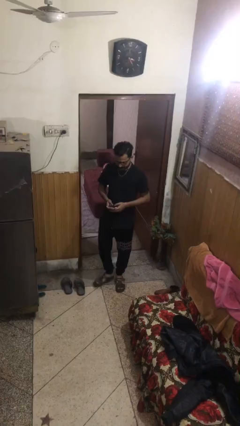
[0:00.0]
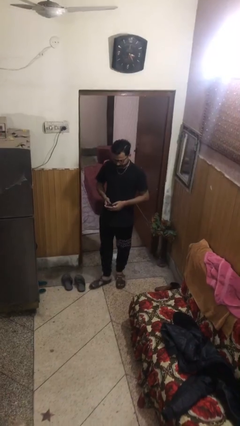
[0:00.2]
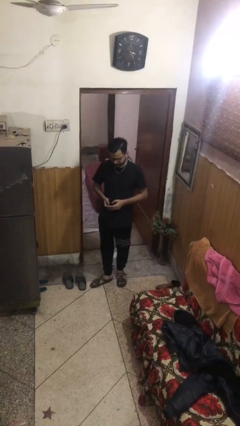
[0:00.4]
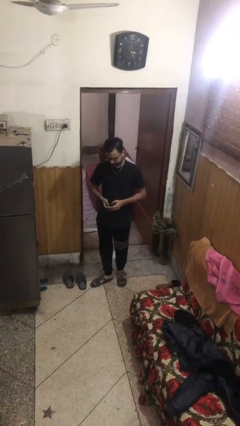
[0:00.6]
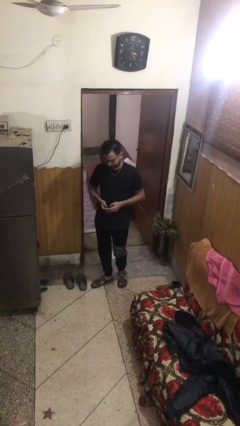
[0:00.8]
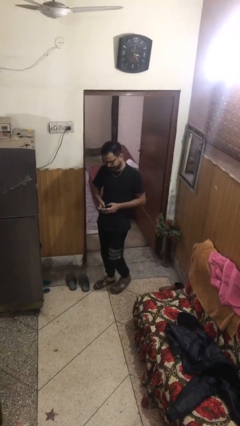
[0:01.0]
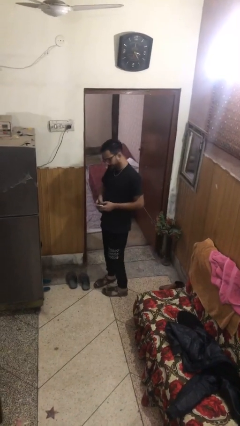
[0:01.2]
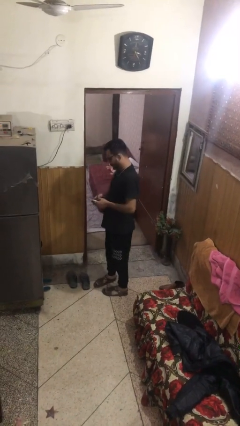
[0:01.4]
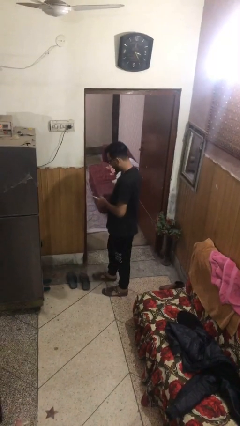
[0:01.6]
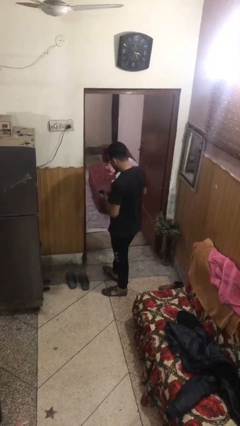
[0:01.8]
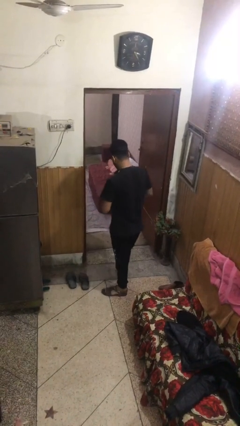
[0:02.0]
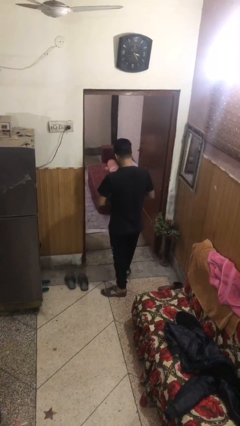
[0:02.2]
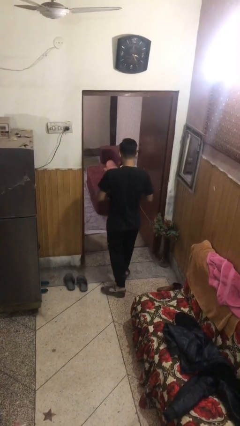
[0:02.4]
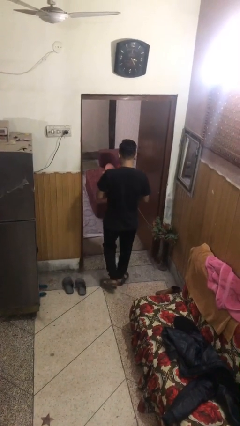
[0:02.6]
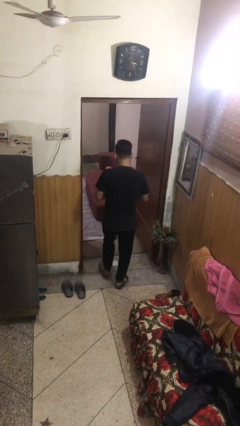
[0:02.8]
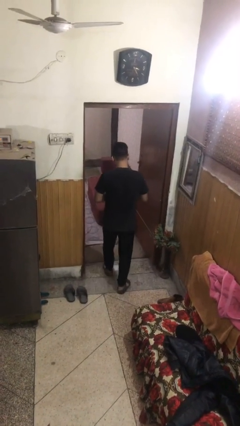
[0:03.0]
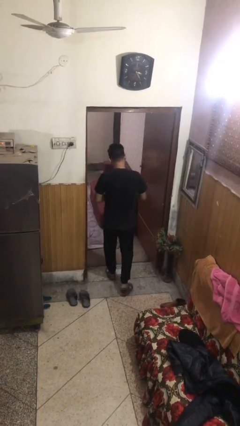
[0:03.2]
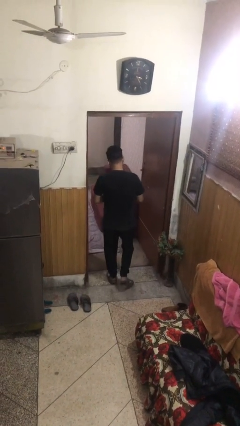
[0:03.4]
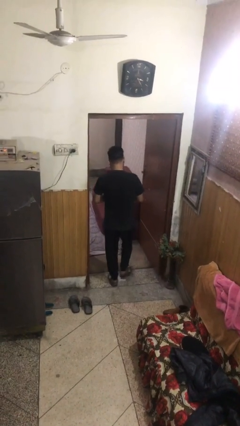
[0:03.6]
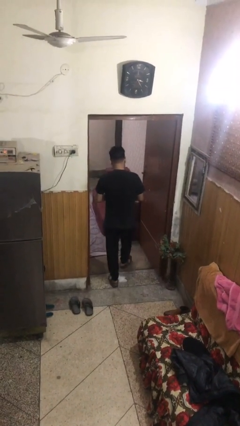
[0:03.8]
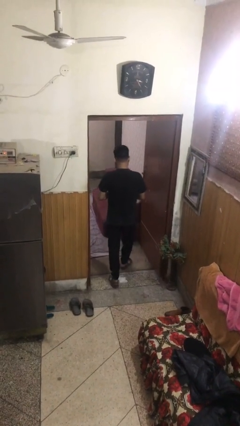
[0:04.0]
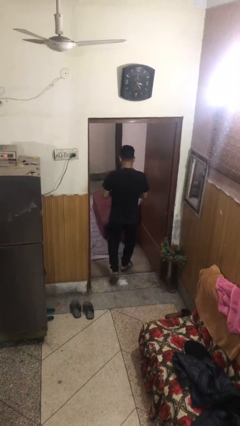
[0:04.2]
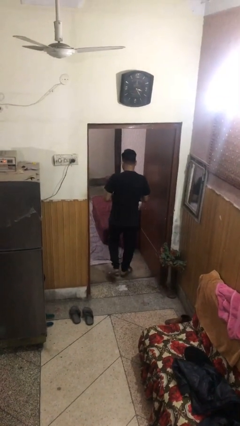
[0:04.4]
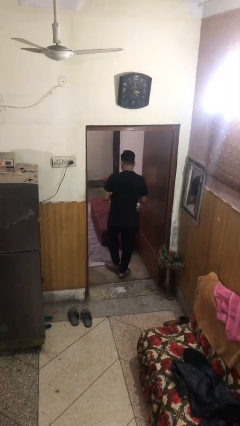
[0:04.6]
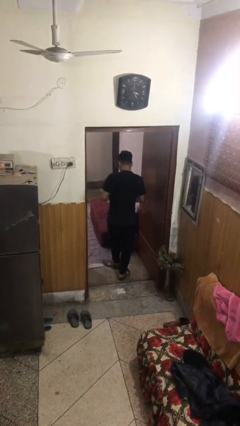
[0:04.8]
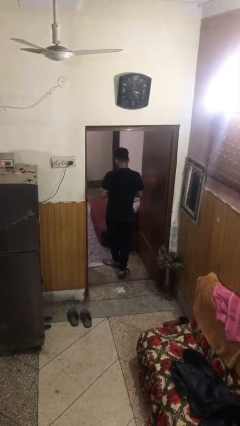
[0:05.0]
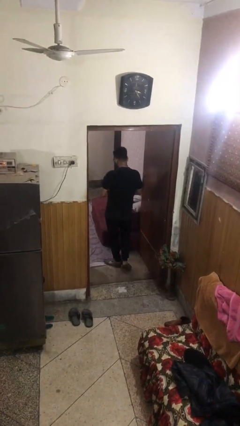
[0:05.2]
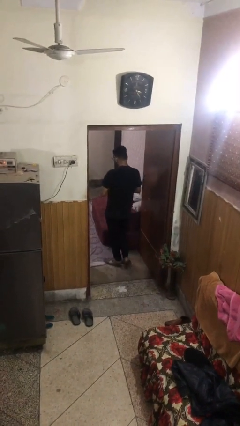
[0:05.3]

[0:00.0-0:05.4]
person exits scene through structure

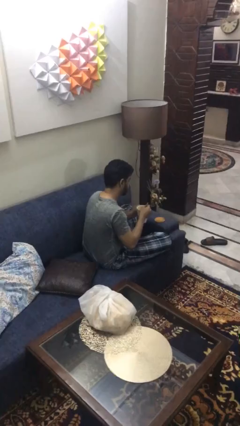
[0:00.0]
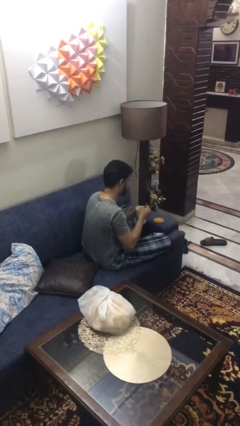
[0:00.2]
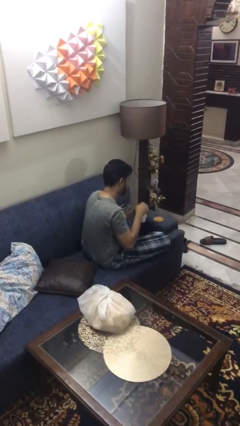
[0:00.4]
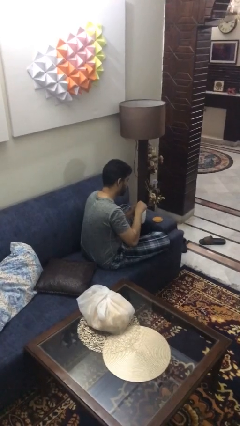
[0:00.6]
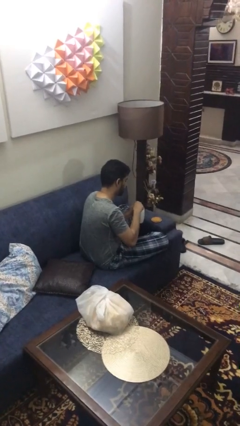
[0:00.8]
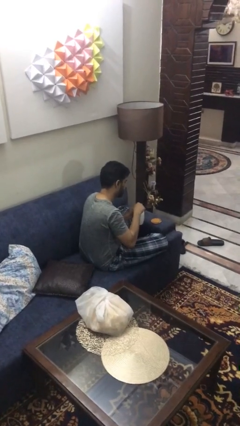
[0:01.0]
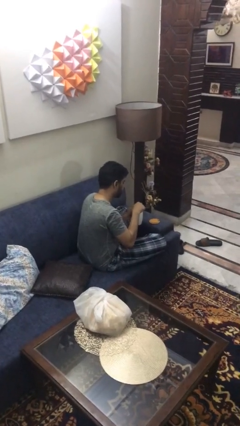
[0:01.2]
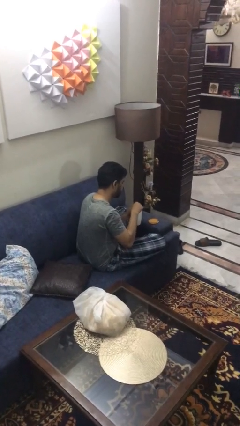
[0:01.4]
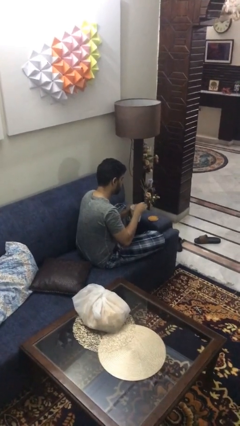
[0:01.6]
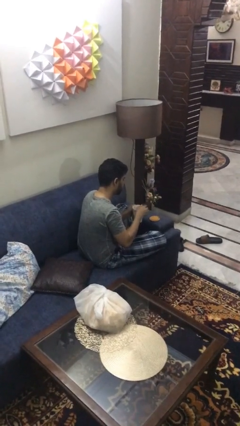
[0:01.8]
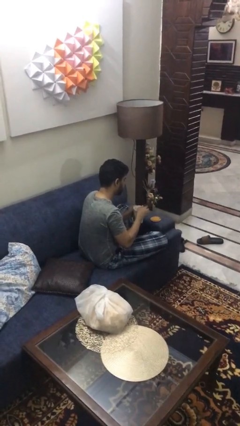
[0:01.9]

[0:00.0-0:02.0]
person stirs mug

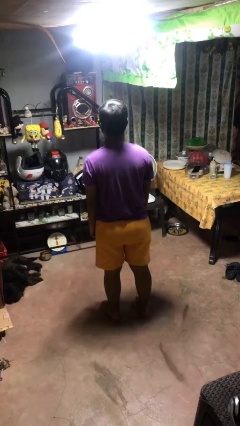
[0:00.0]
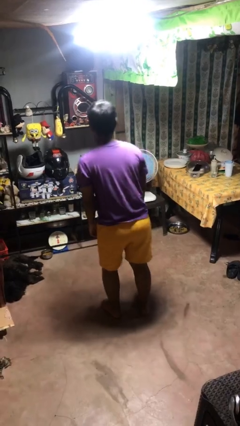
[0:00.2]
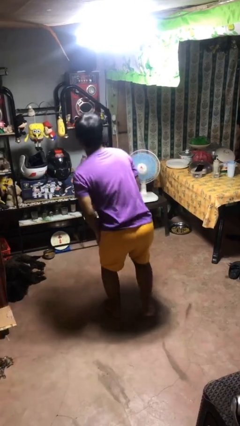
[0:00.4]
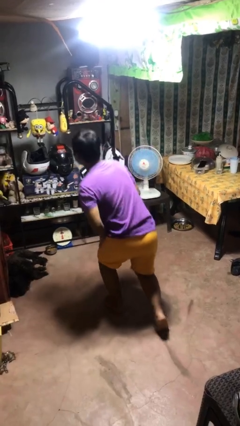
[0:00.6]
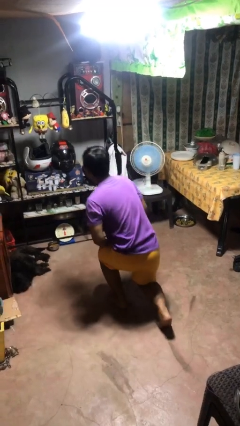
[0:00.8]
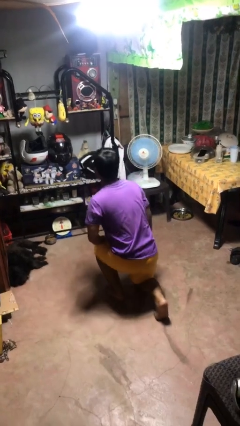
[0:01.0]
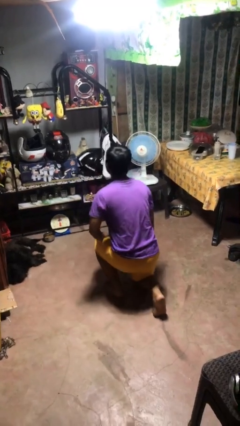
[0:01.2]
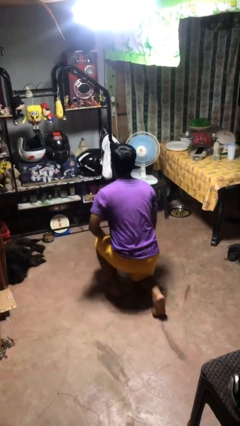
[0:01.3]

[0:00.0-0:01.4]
person kneels

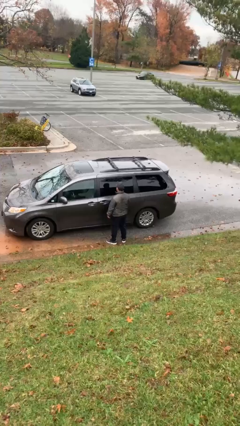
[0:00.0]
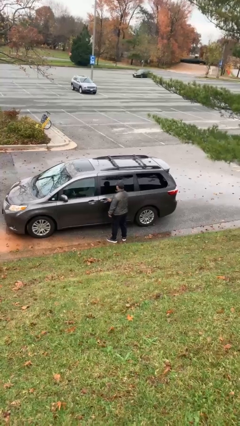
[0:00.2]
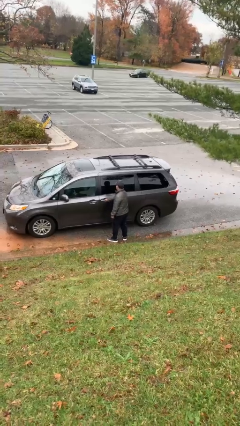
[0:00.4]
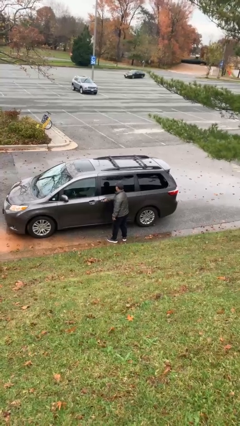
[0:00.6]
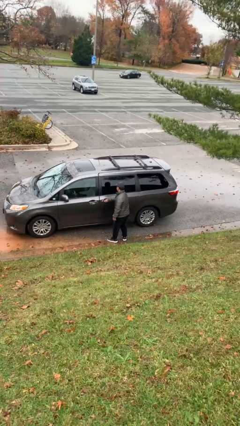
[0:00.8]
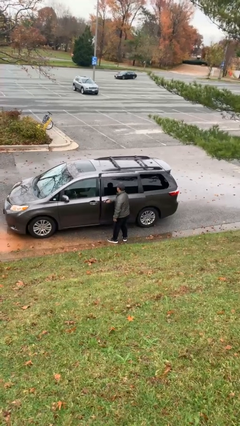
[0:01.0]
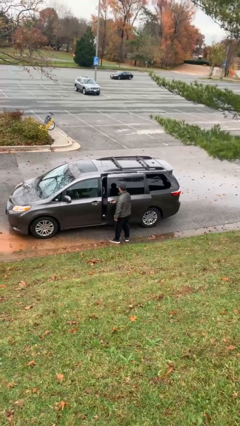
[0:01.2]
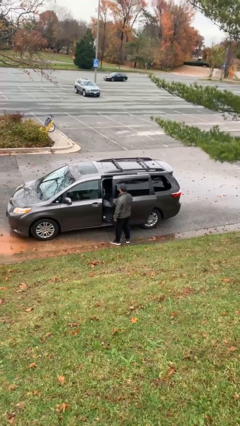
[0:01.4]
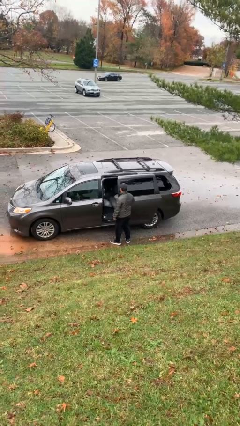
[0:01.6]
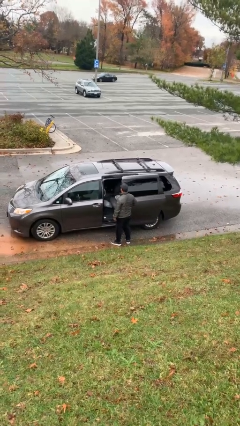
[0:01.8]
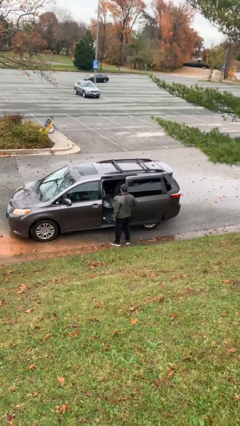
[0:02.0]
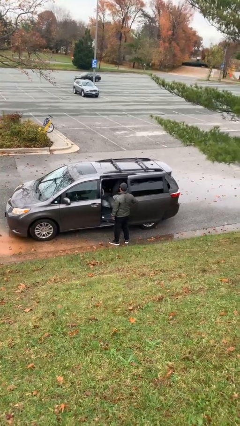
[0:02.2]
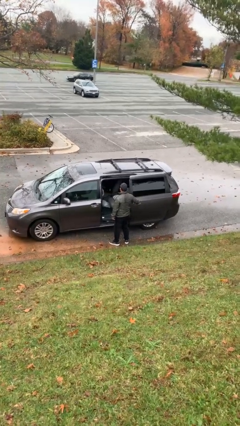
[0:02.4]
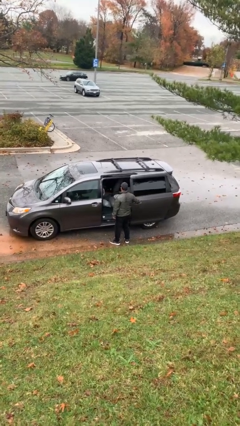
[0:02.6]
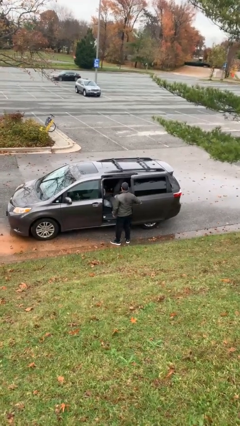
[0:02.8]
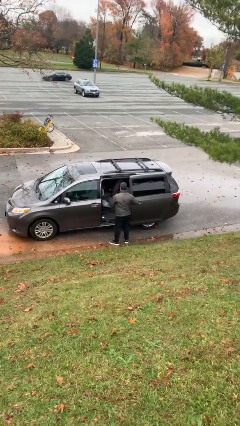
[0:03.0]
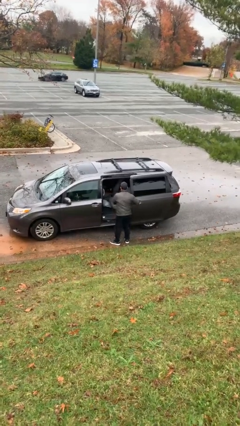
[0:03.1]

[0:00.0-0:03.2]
person opens car door

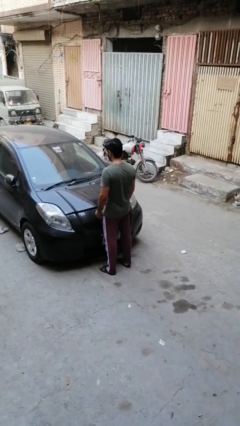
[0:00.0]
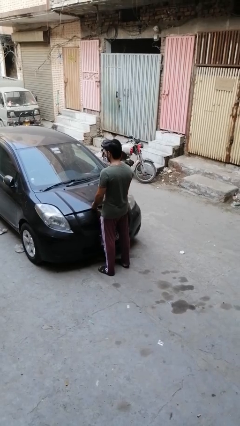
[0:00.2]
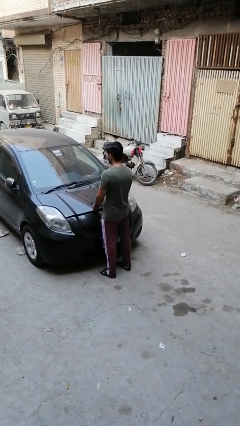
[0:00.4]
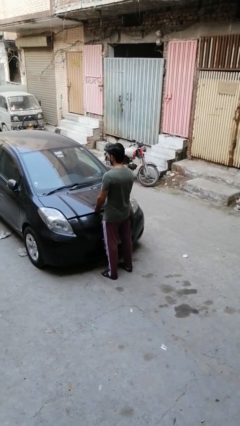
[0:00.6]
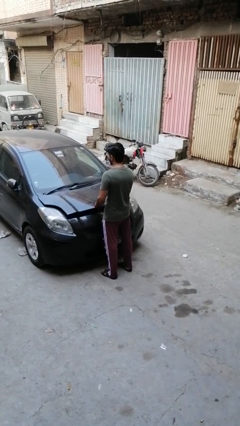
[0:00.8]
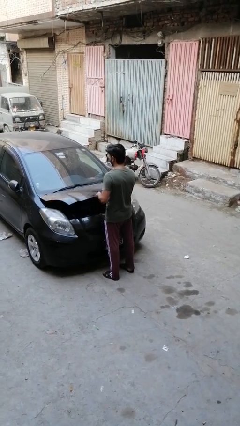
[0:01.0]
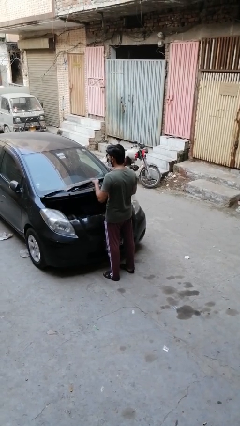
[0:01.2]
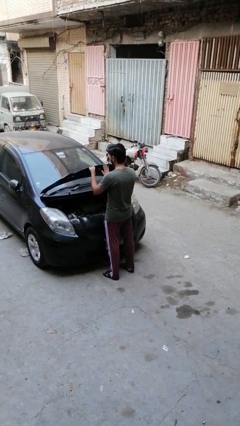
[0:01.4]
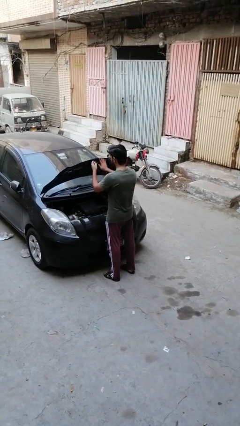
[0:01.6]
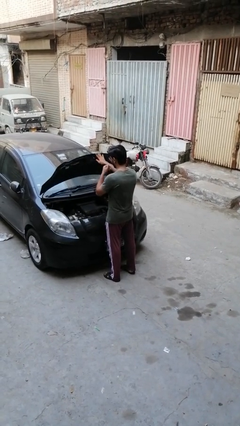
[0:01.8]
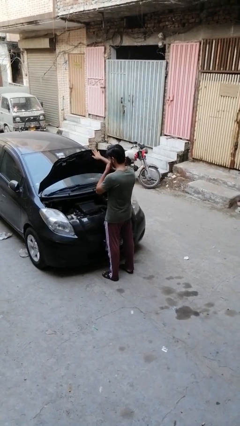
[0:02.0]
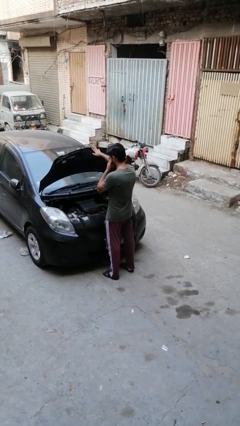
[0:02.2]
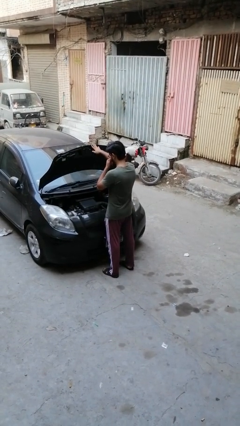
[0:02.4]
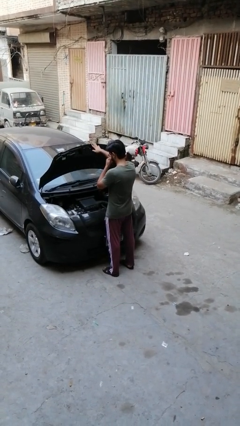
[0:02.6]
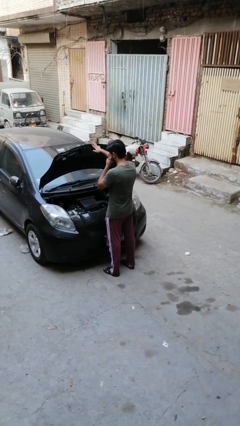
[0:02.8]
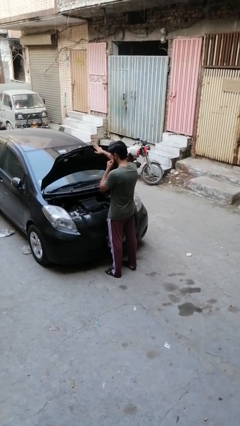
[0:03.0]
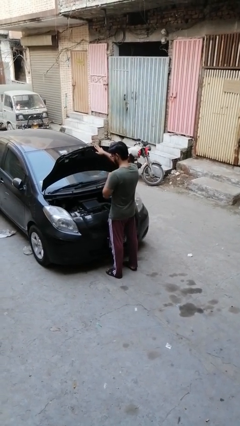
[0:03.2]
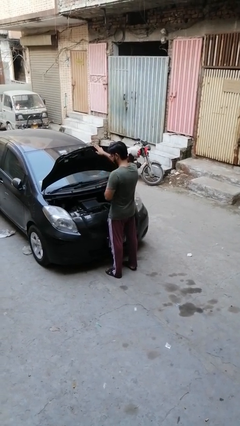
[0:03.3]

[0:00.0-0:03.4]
person opens car hood

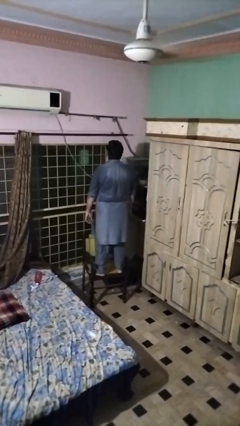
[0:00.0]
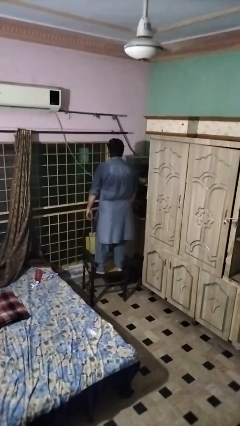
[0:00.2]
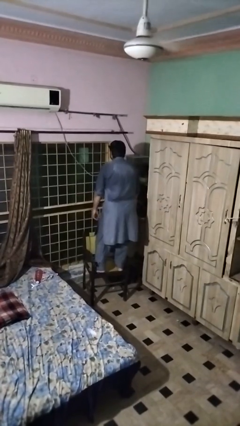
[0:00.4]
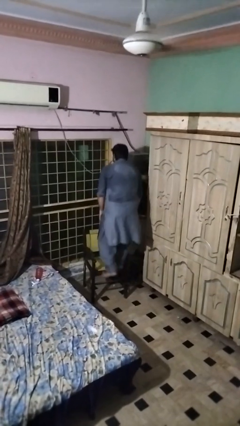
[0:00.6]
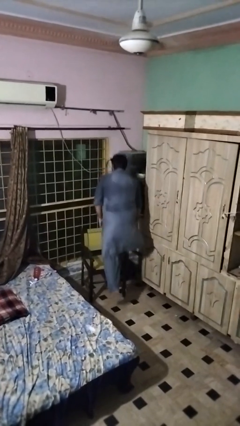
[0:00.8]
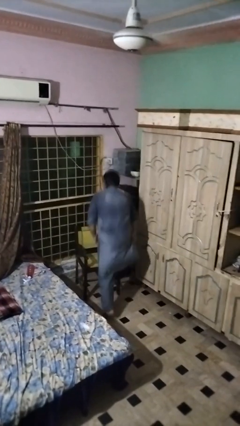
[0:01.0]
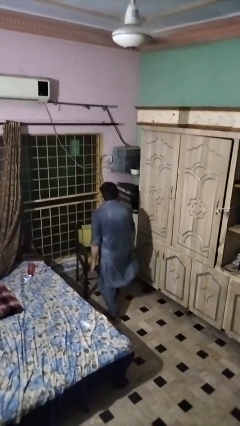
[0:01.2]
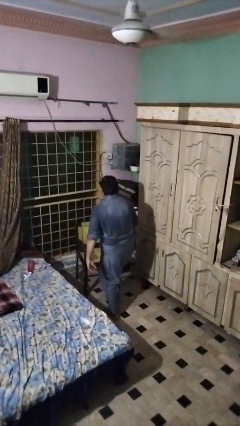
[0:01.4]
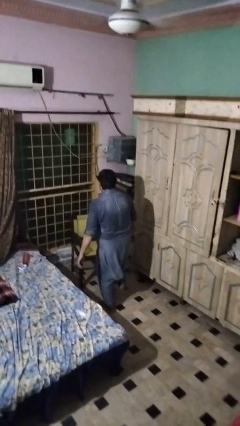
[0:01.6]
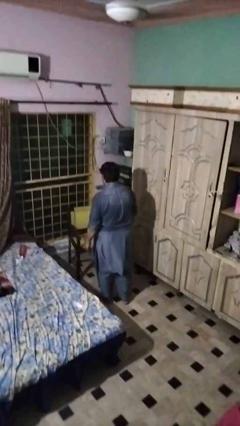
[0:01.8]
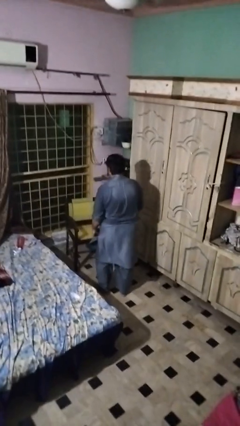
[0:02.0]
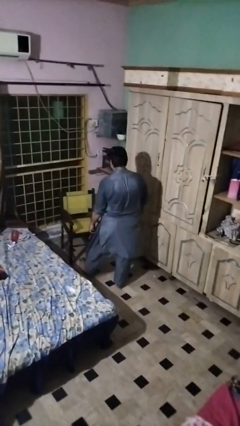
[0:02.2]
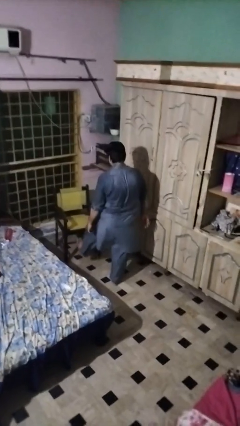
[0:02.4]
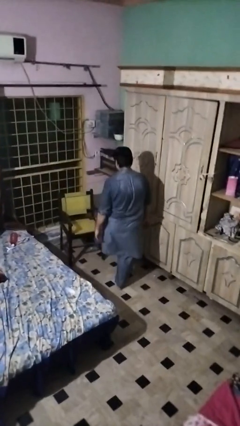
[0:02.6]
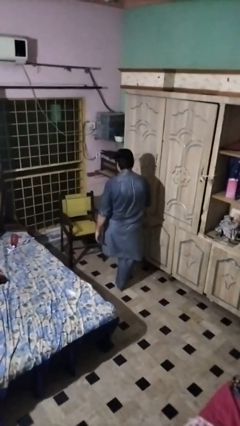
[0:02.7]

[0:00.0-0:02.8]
person climbs off chair
